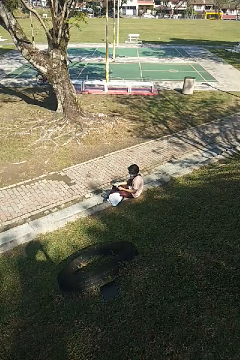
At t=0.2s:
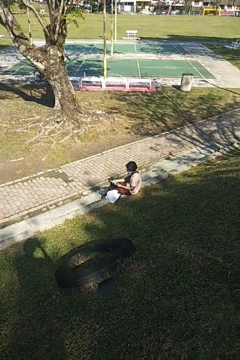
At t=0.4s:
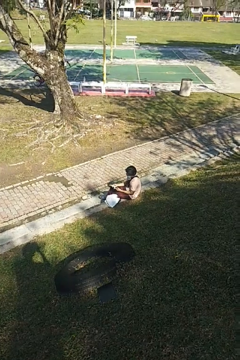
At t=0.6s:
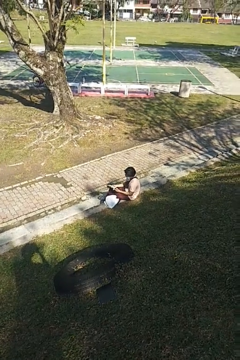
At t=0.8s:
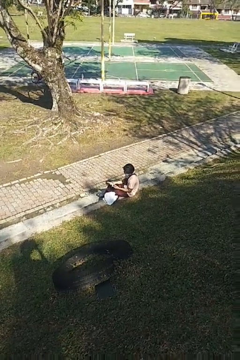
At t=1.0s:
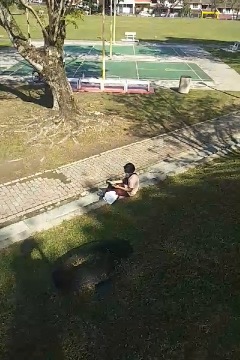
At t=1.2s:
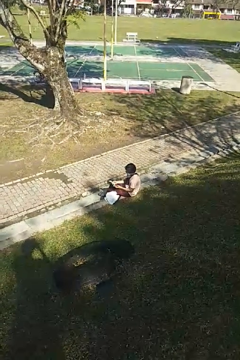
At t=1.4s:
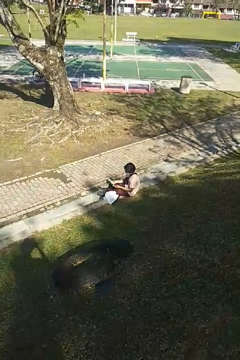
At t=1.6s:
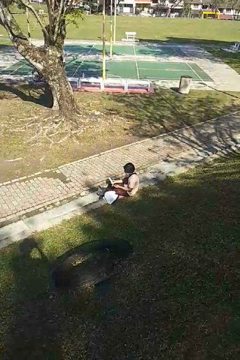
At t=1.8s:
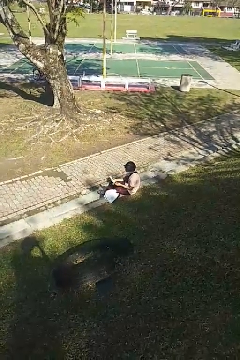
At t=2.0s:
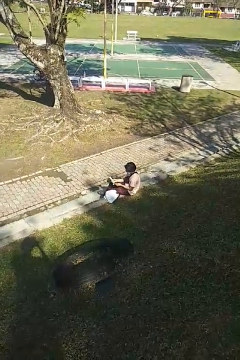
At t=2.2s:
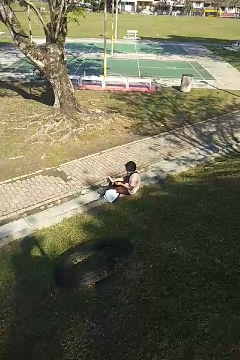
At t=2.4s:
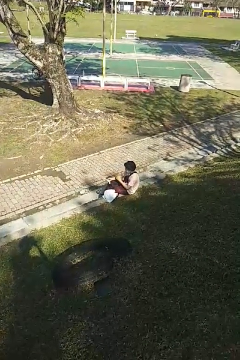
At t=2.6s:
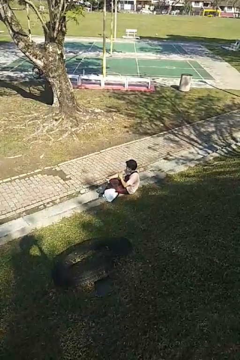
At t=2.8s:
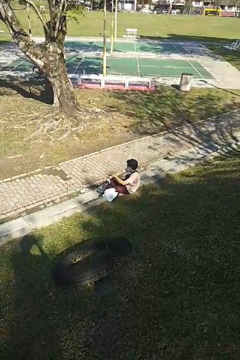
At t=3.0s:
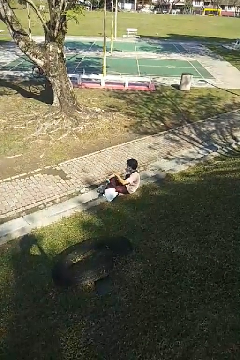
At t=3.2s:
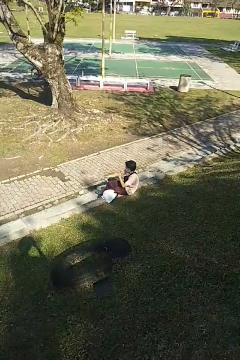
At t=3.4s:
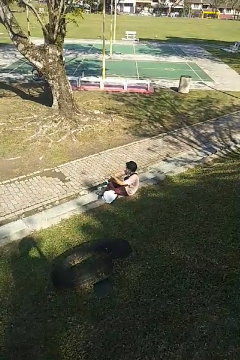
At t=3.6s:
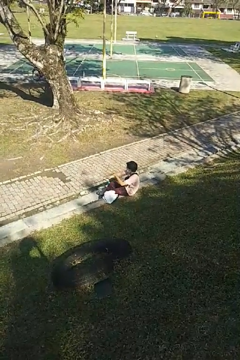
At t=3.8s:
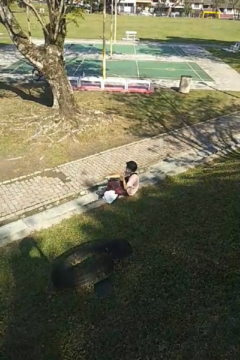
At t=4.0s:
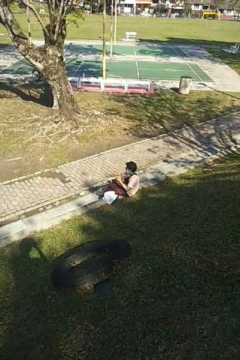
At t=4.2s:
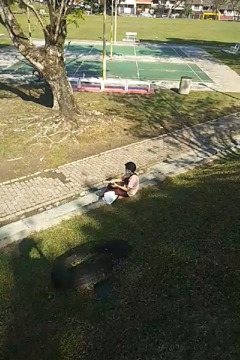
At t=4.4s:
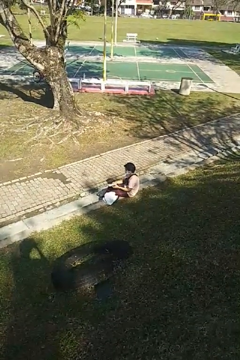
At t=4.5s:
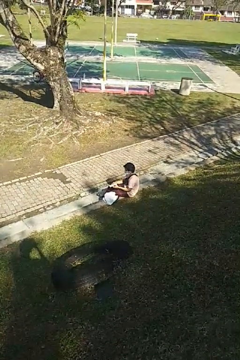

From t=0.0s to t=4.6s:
person applies sunscreen

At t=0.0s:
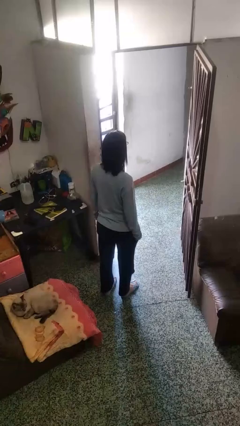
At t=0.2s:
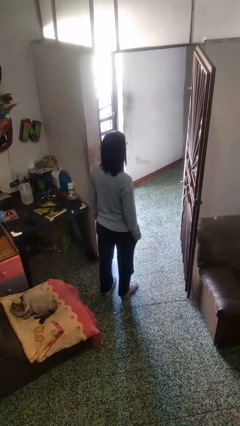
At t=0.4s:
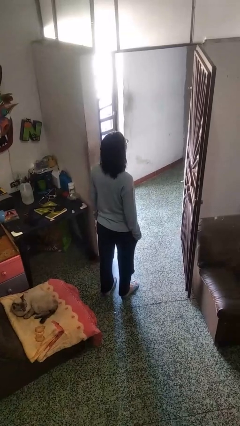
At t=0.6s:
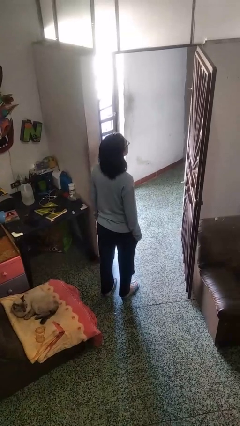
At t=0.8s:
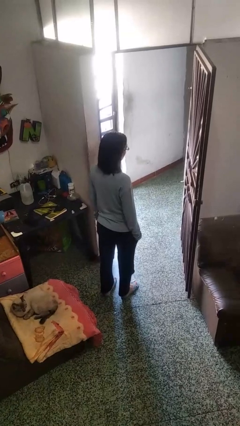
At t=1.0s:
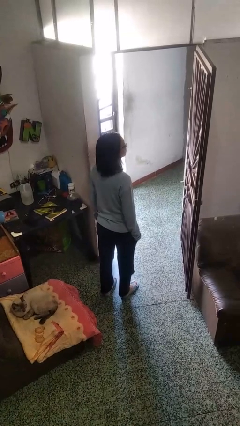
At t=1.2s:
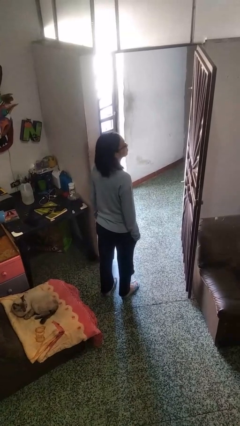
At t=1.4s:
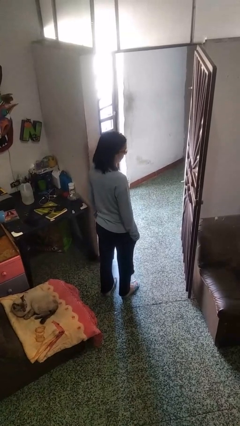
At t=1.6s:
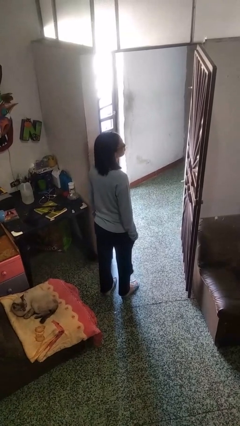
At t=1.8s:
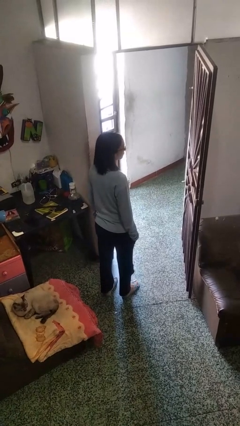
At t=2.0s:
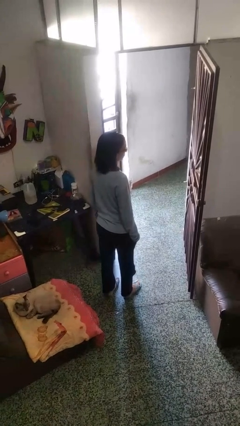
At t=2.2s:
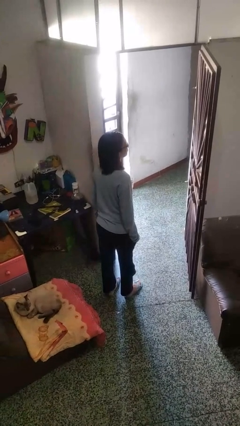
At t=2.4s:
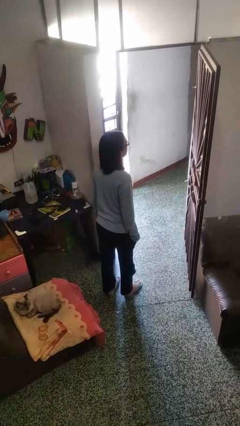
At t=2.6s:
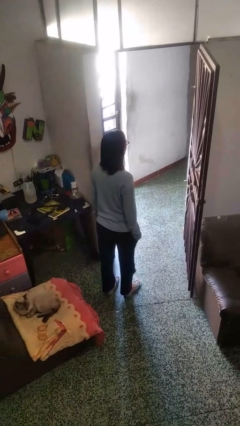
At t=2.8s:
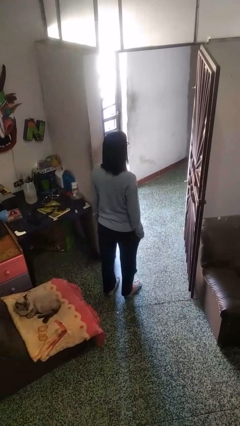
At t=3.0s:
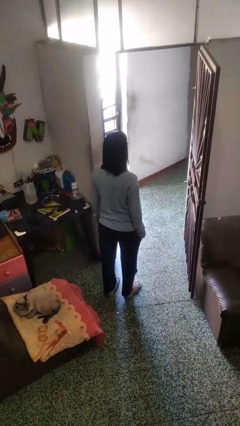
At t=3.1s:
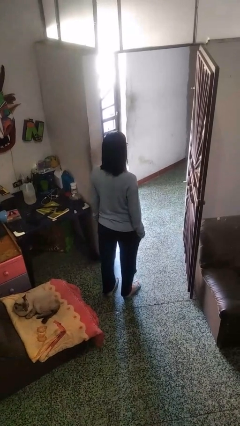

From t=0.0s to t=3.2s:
person nods head

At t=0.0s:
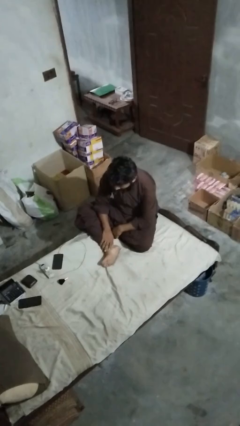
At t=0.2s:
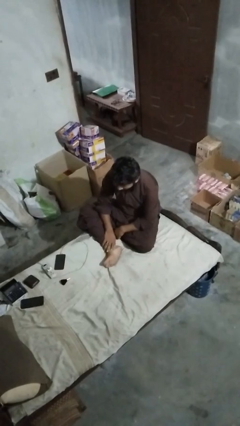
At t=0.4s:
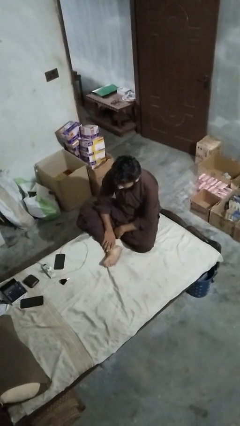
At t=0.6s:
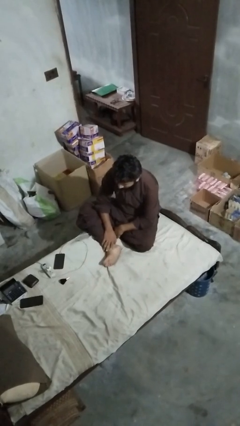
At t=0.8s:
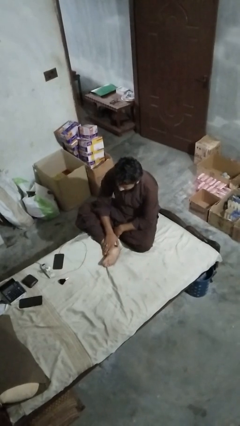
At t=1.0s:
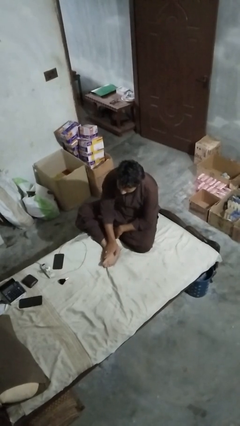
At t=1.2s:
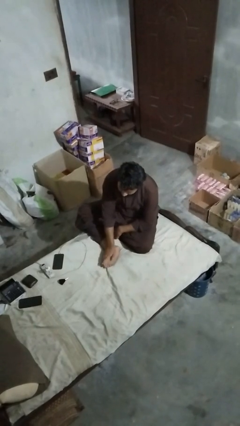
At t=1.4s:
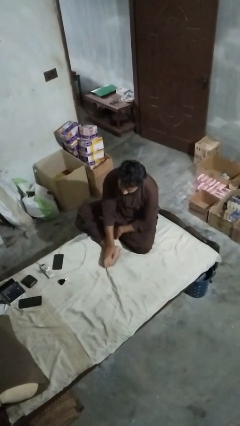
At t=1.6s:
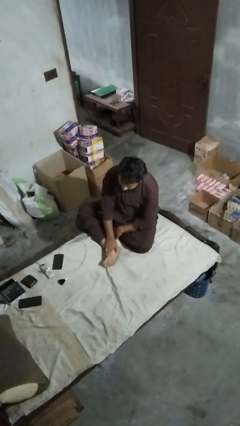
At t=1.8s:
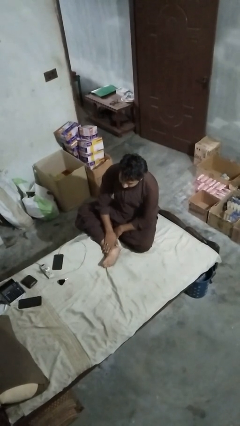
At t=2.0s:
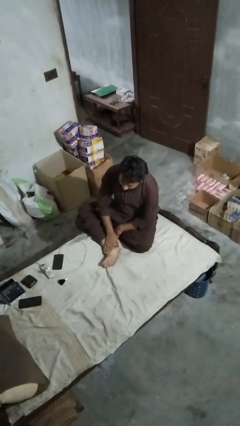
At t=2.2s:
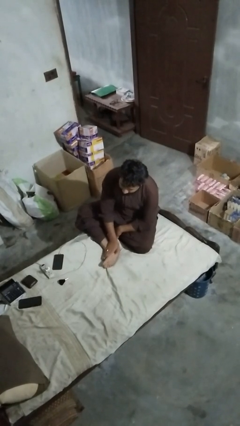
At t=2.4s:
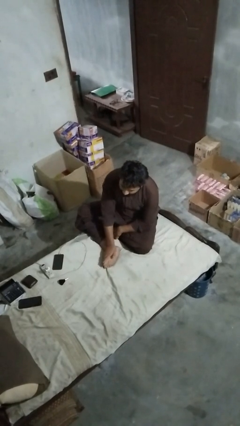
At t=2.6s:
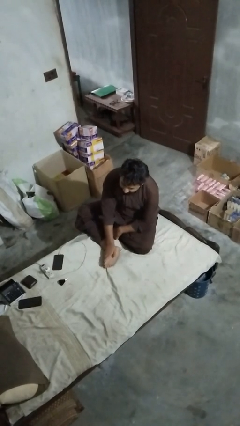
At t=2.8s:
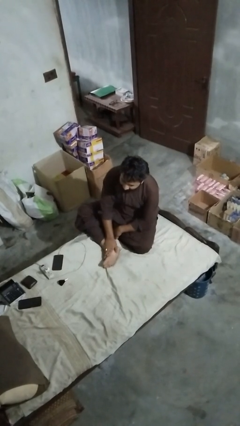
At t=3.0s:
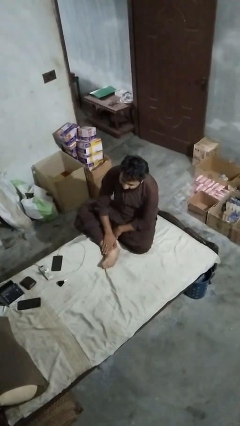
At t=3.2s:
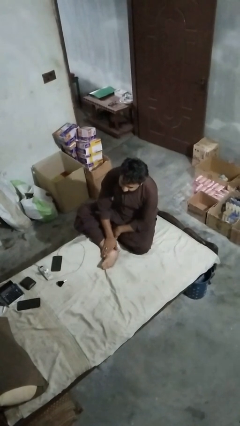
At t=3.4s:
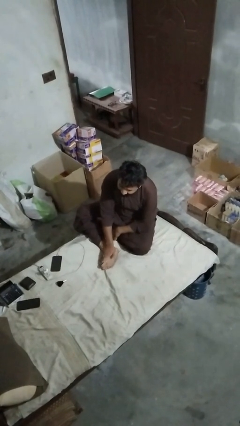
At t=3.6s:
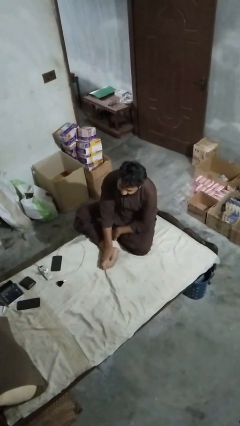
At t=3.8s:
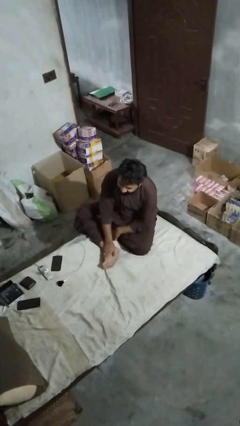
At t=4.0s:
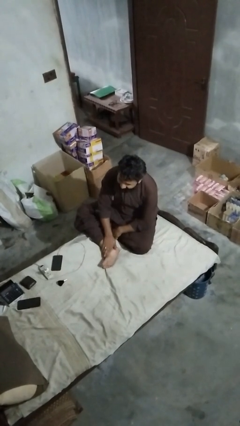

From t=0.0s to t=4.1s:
person rubs foot

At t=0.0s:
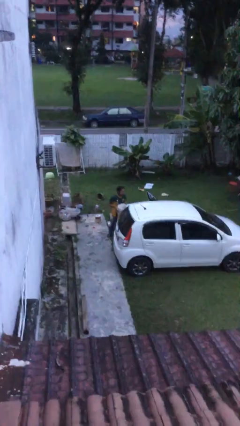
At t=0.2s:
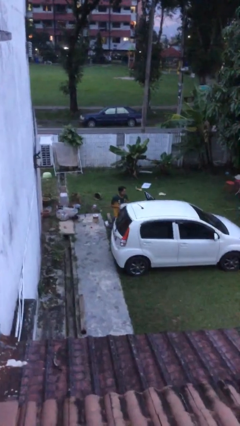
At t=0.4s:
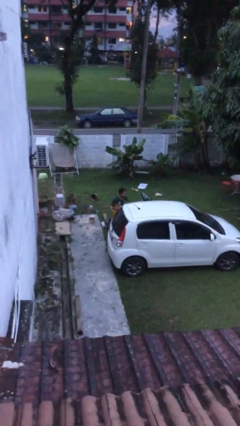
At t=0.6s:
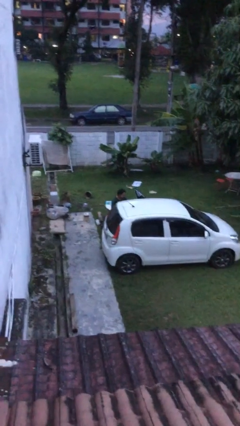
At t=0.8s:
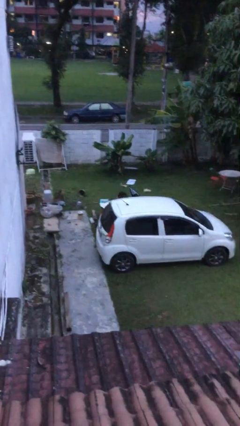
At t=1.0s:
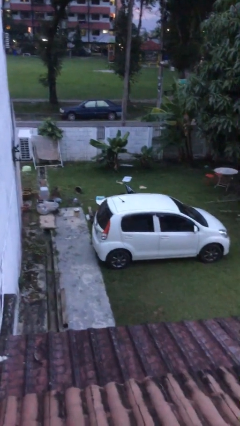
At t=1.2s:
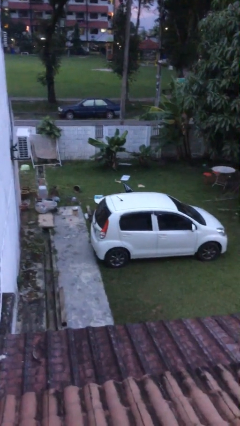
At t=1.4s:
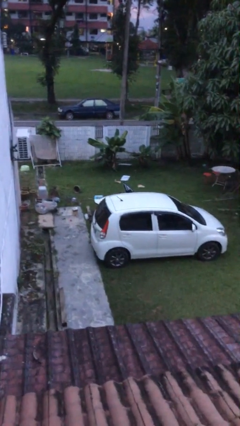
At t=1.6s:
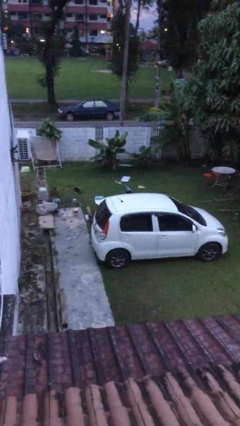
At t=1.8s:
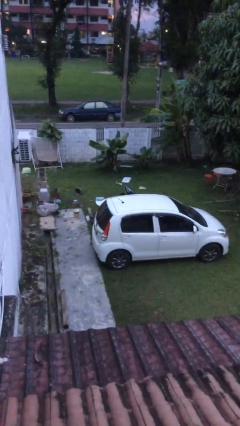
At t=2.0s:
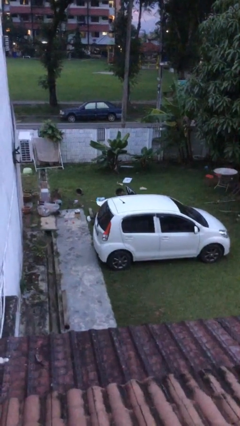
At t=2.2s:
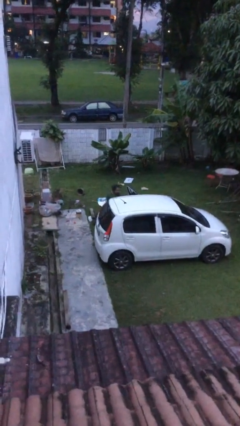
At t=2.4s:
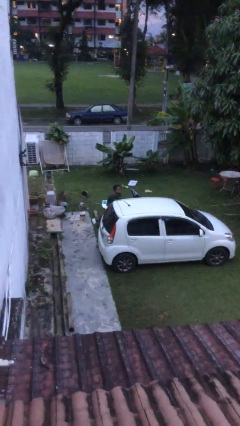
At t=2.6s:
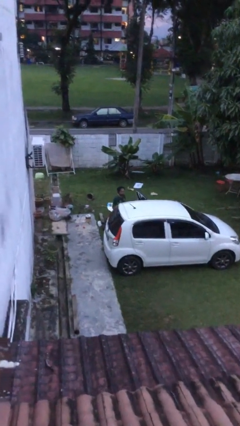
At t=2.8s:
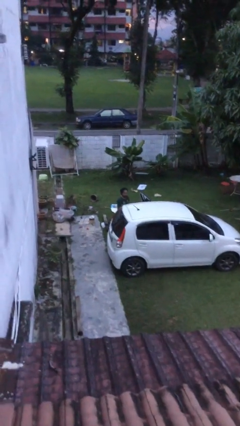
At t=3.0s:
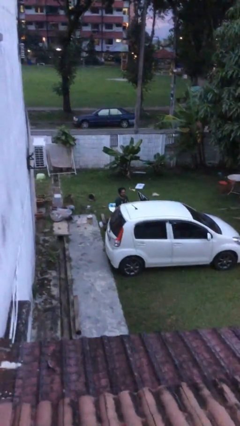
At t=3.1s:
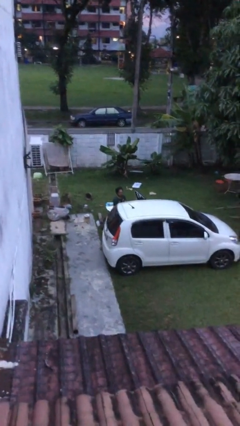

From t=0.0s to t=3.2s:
person loads car

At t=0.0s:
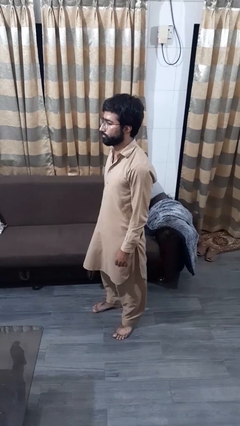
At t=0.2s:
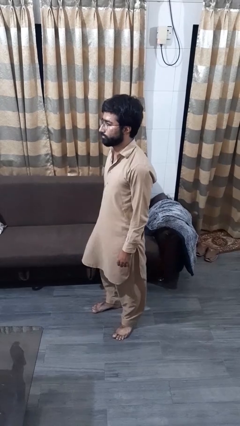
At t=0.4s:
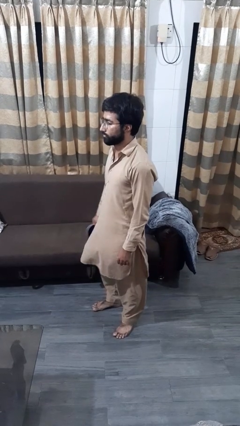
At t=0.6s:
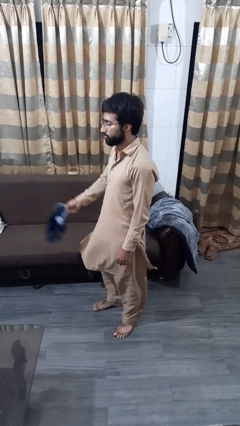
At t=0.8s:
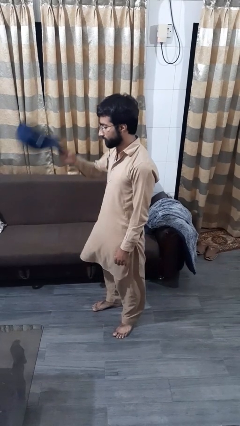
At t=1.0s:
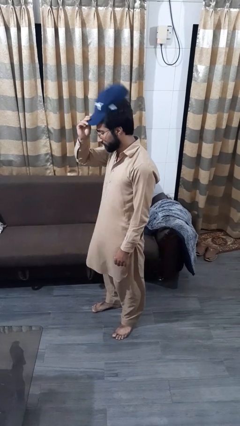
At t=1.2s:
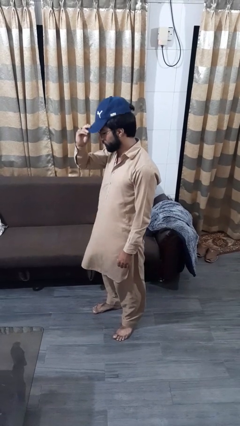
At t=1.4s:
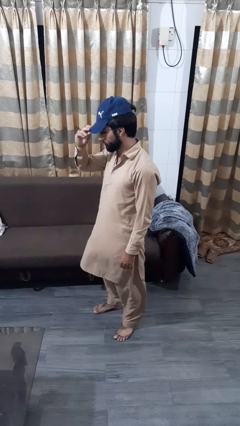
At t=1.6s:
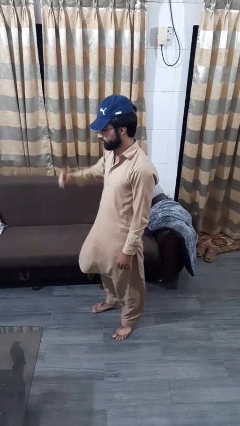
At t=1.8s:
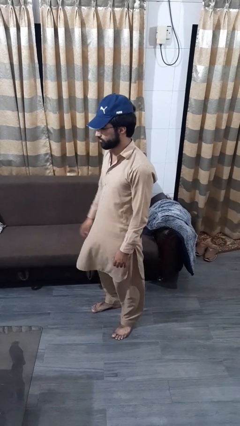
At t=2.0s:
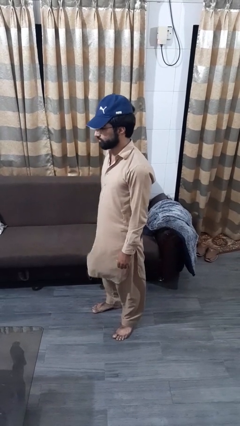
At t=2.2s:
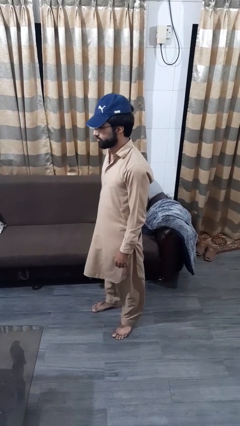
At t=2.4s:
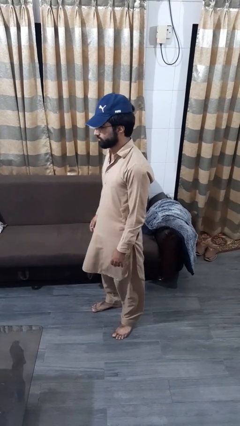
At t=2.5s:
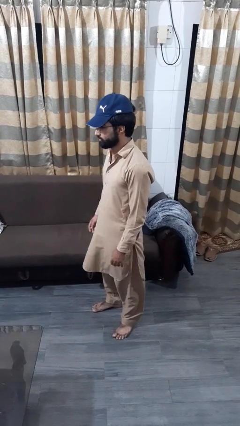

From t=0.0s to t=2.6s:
person puts on hat

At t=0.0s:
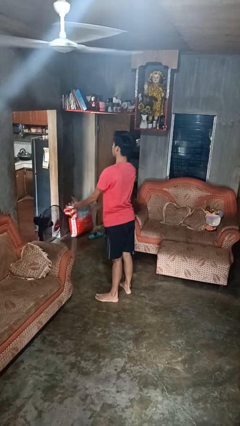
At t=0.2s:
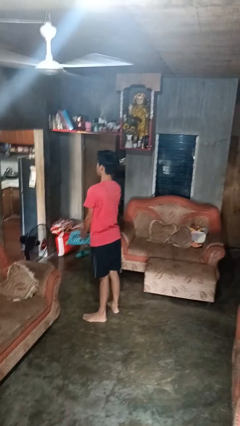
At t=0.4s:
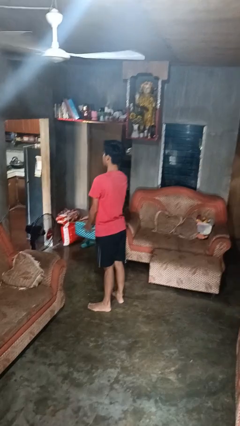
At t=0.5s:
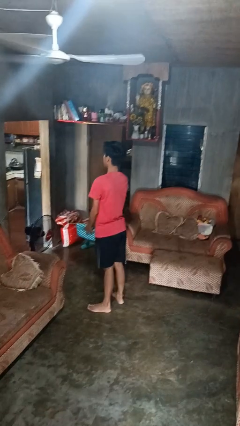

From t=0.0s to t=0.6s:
person catches dropped object
